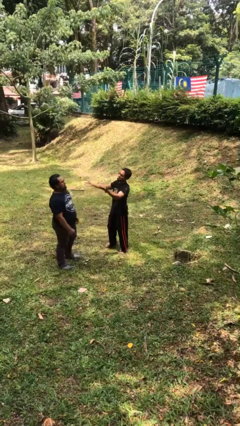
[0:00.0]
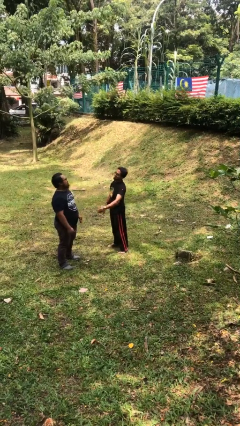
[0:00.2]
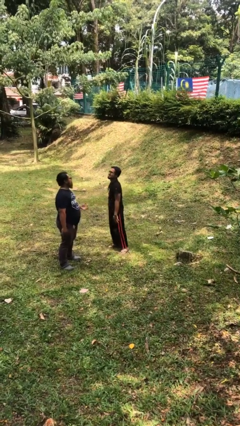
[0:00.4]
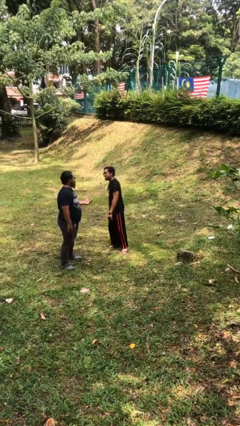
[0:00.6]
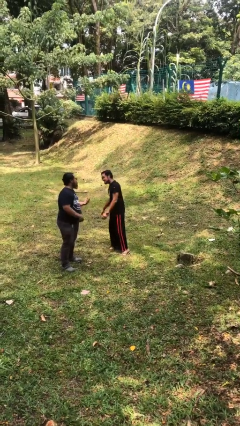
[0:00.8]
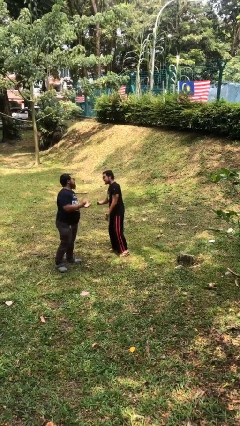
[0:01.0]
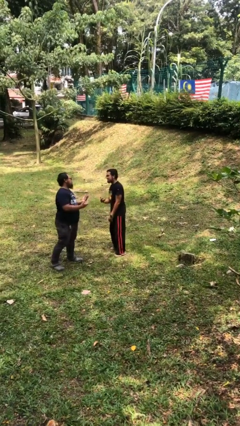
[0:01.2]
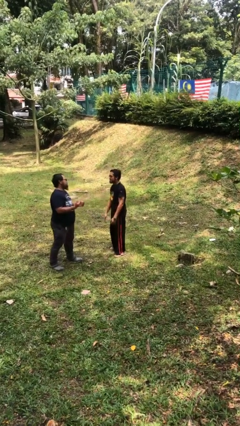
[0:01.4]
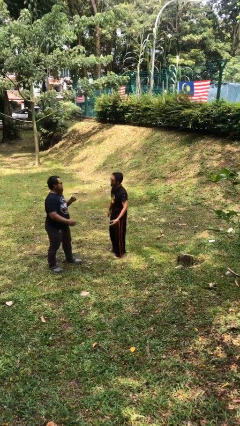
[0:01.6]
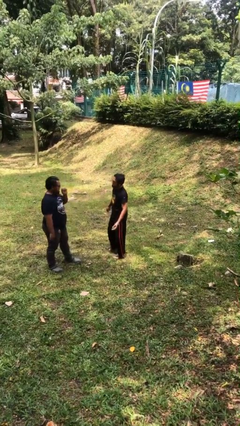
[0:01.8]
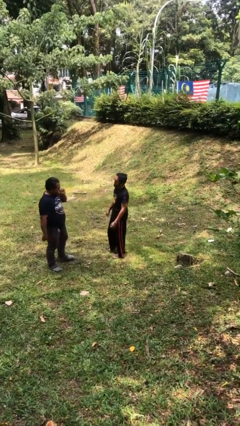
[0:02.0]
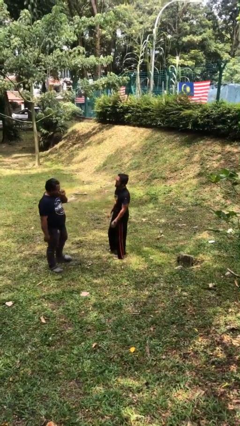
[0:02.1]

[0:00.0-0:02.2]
person talks to person

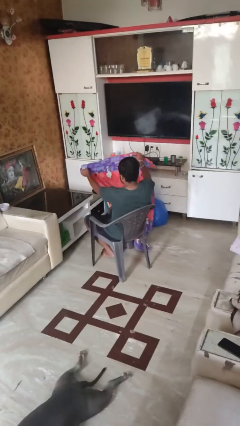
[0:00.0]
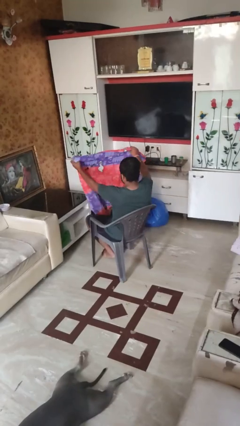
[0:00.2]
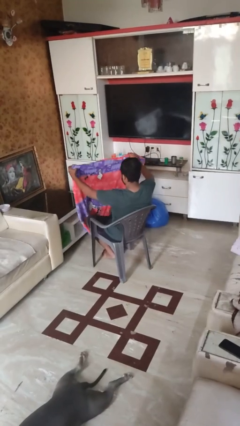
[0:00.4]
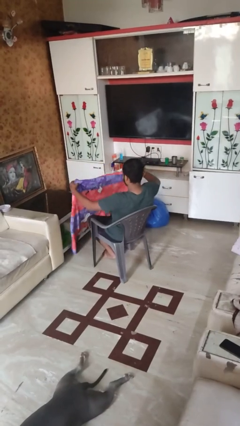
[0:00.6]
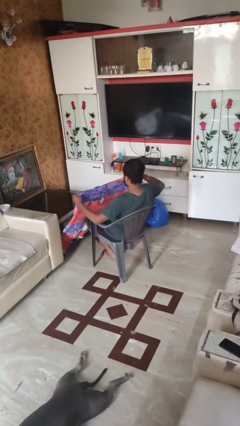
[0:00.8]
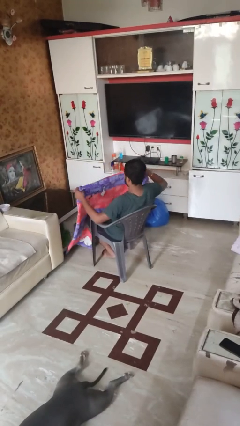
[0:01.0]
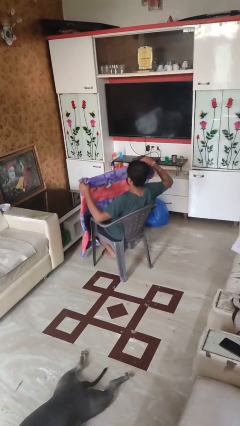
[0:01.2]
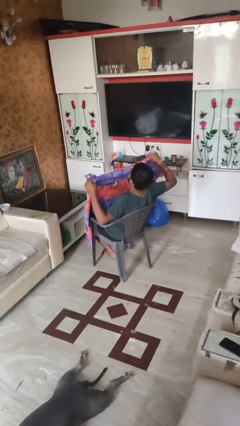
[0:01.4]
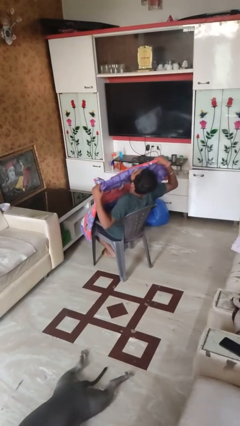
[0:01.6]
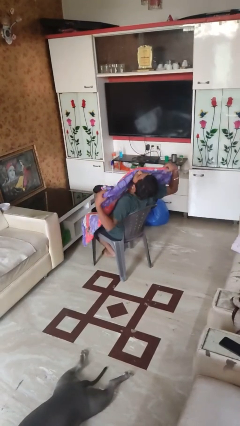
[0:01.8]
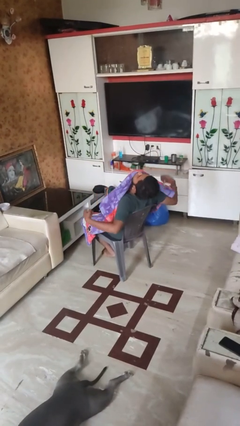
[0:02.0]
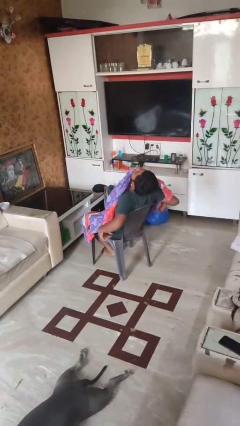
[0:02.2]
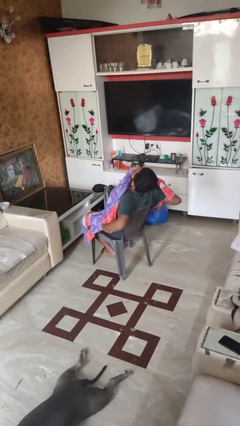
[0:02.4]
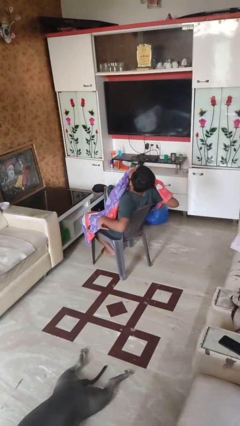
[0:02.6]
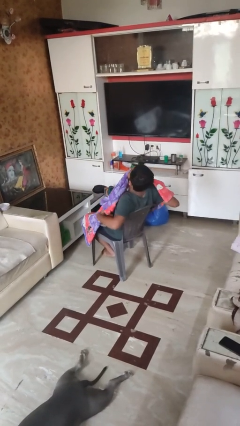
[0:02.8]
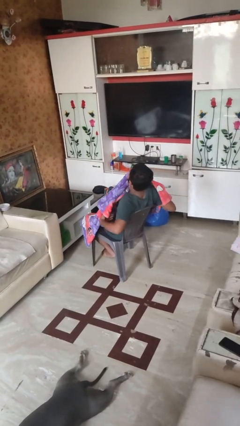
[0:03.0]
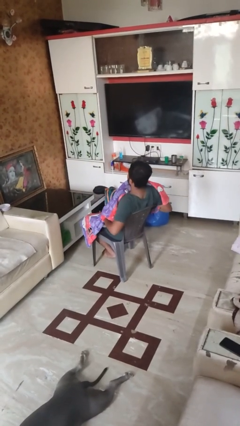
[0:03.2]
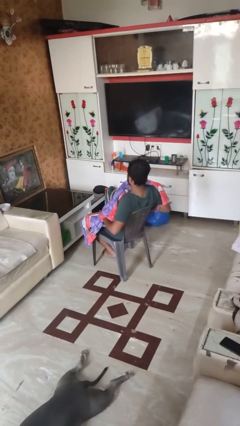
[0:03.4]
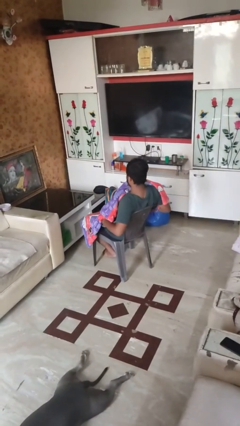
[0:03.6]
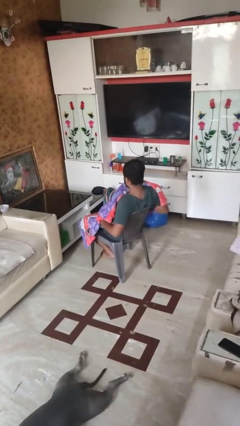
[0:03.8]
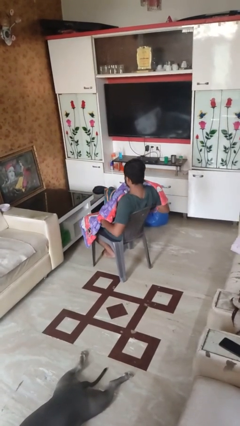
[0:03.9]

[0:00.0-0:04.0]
person covers with blanket

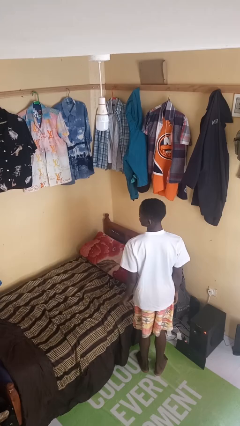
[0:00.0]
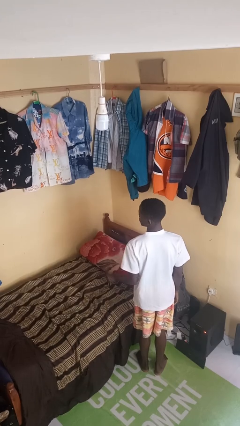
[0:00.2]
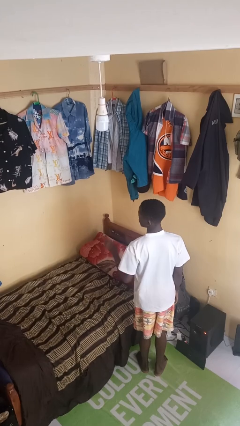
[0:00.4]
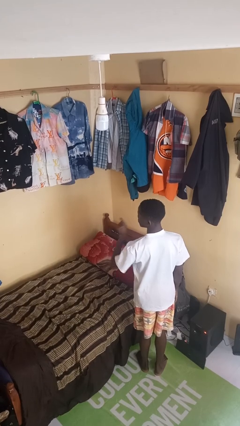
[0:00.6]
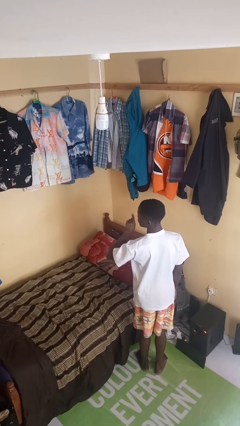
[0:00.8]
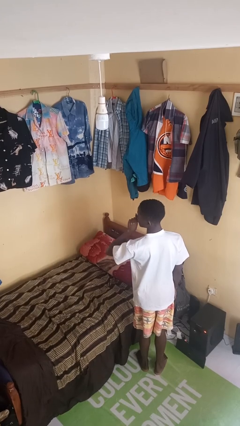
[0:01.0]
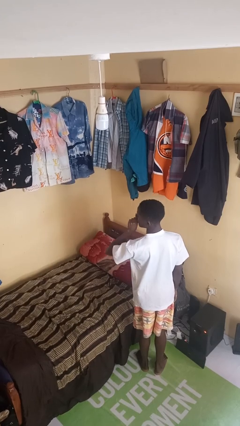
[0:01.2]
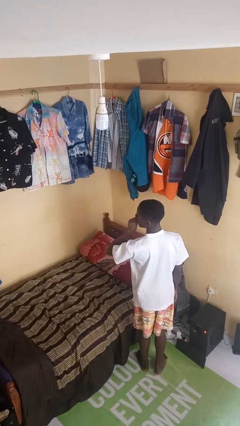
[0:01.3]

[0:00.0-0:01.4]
person gestures be quiet

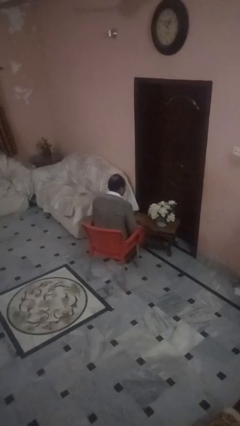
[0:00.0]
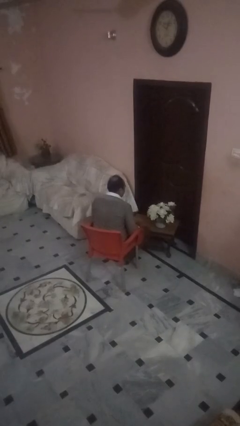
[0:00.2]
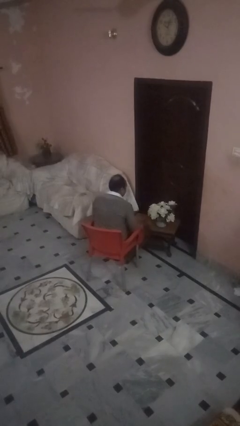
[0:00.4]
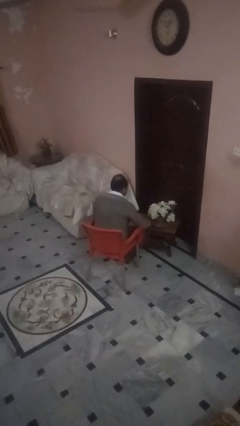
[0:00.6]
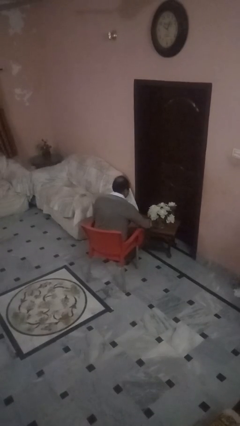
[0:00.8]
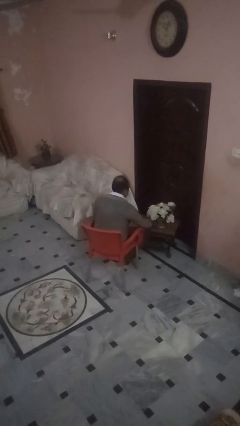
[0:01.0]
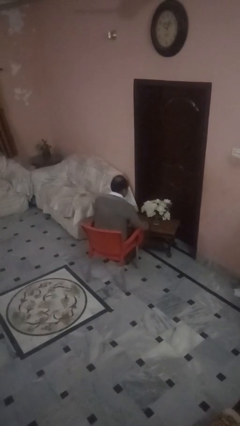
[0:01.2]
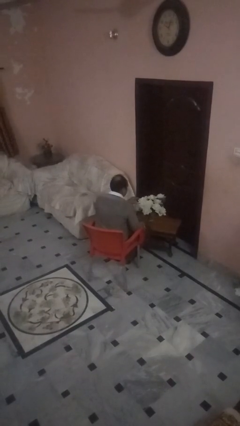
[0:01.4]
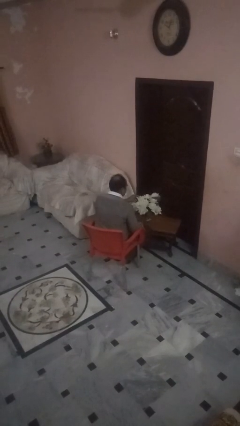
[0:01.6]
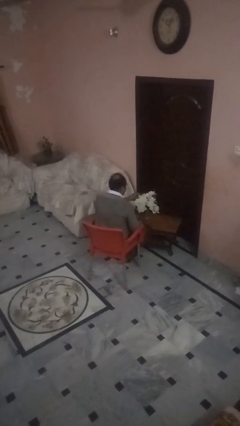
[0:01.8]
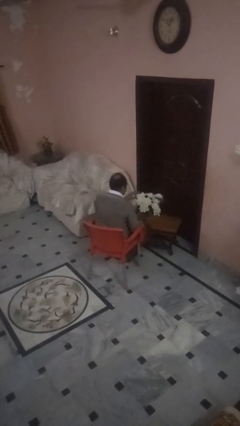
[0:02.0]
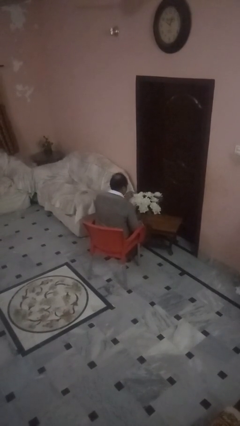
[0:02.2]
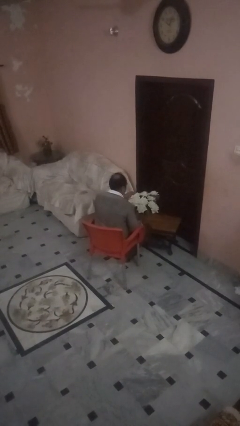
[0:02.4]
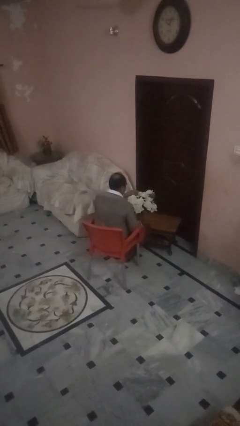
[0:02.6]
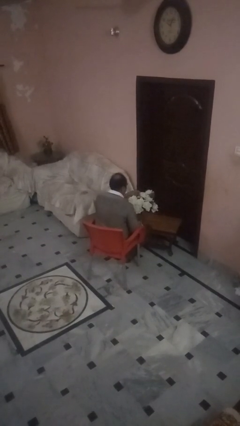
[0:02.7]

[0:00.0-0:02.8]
person arranges flowers in vase

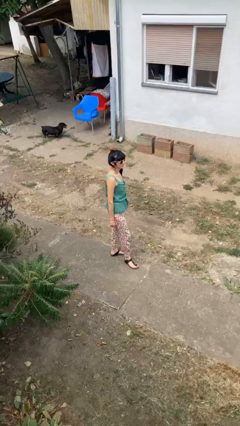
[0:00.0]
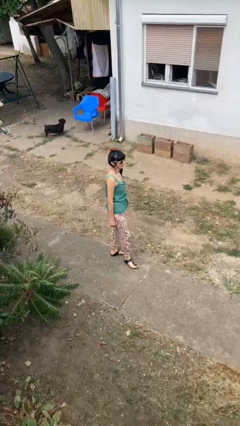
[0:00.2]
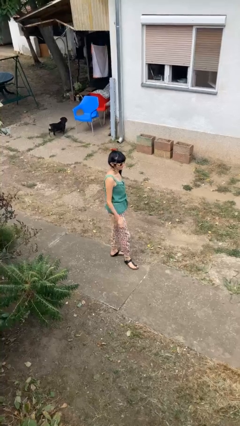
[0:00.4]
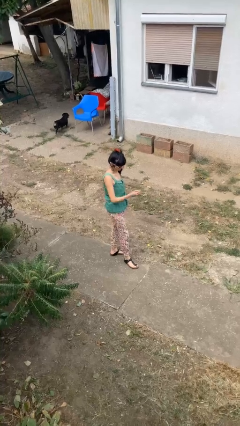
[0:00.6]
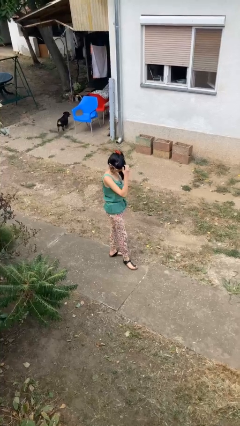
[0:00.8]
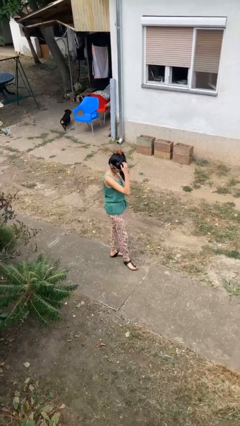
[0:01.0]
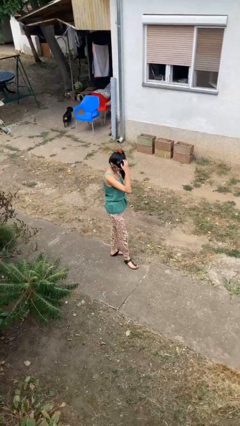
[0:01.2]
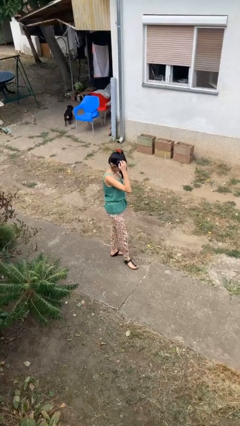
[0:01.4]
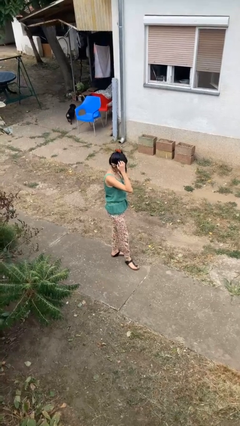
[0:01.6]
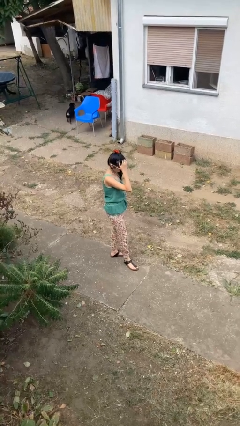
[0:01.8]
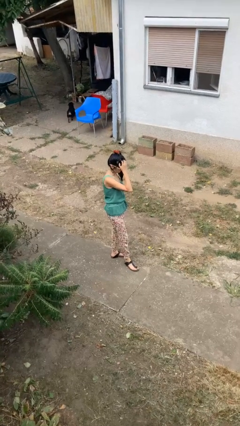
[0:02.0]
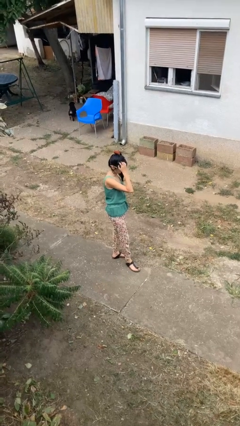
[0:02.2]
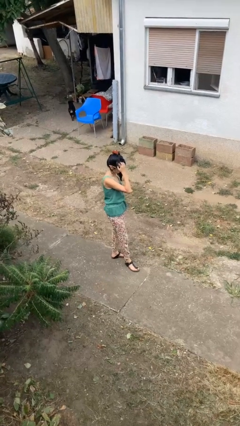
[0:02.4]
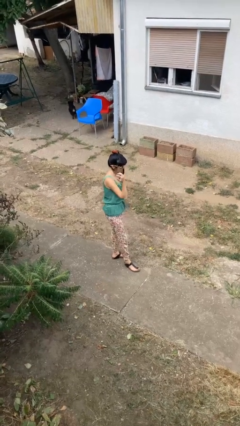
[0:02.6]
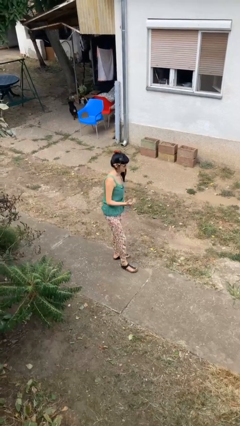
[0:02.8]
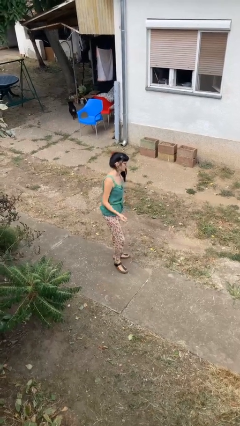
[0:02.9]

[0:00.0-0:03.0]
person scratches face

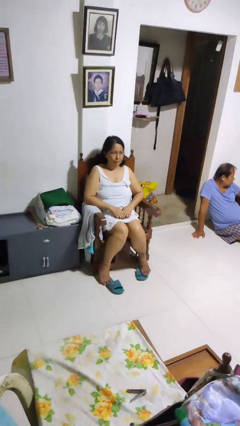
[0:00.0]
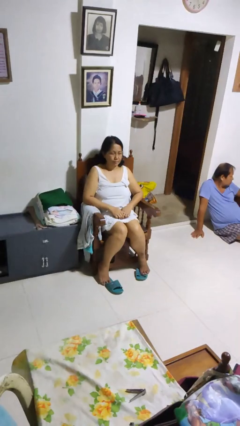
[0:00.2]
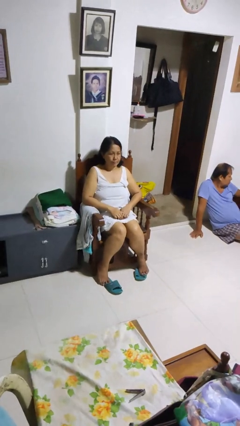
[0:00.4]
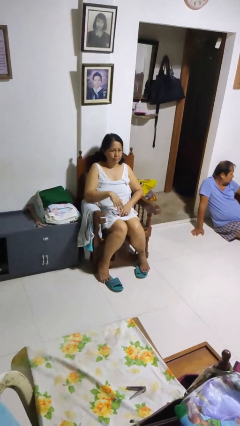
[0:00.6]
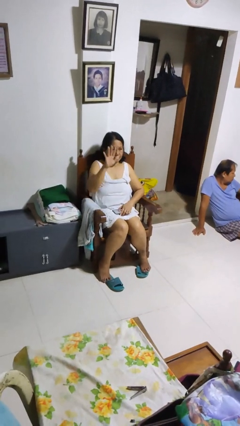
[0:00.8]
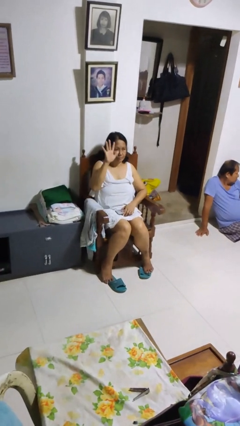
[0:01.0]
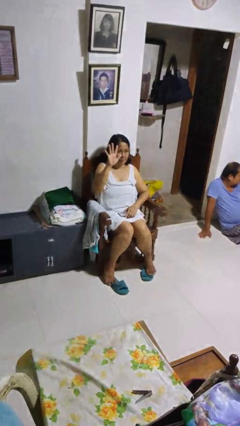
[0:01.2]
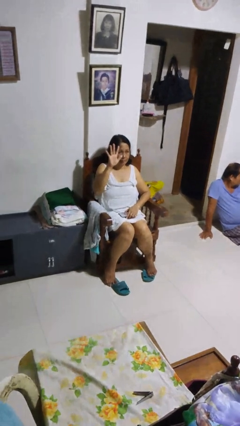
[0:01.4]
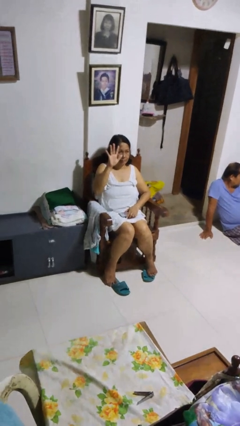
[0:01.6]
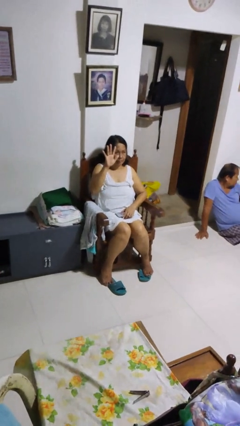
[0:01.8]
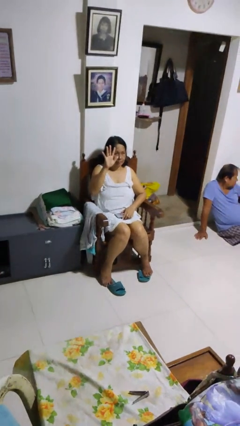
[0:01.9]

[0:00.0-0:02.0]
person gestures number five

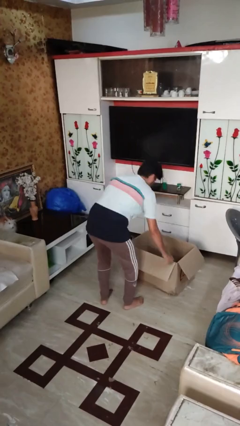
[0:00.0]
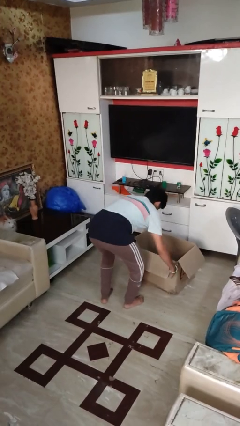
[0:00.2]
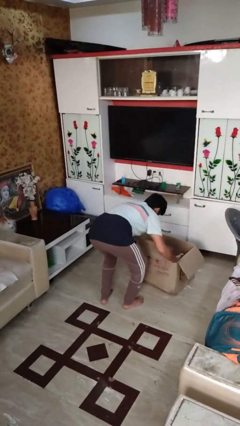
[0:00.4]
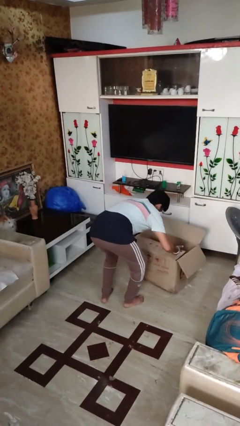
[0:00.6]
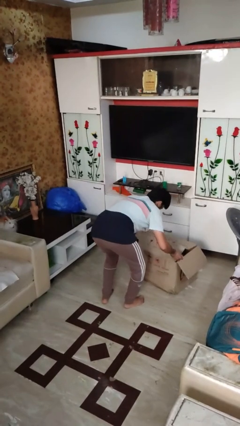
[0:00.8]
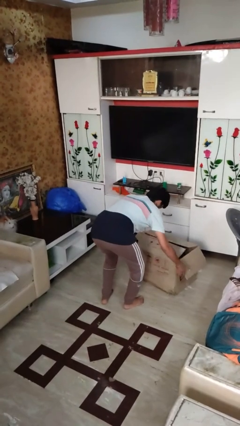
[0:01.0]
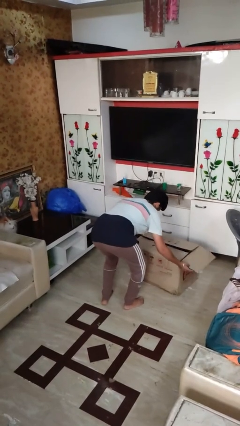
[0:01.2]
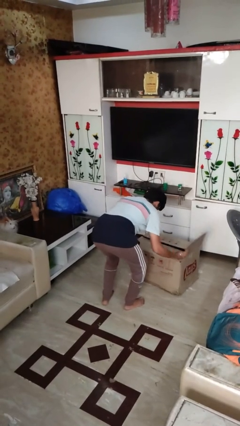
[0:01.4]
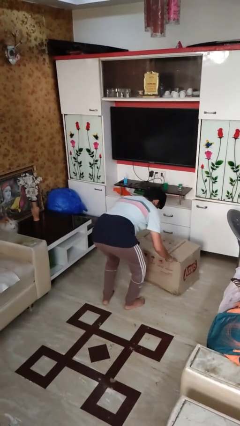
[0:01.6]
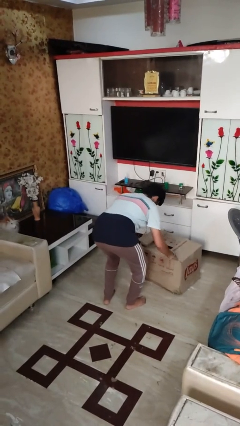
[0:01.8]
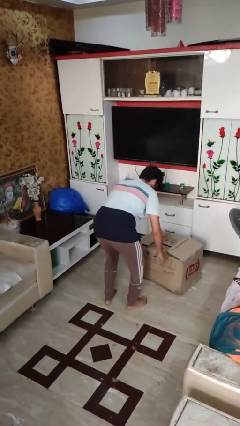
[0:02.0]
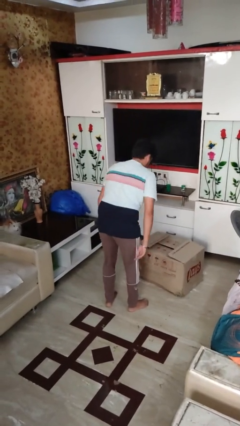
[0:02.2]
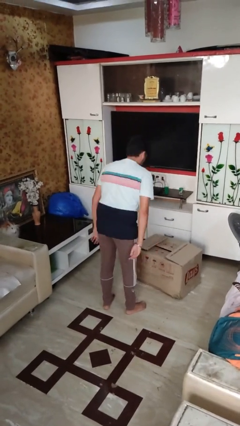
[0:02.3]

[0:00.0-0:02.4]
person closes box
